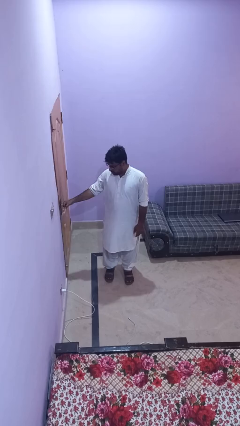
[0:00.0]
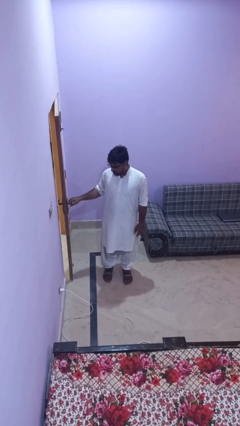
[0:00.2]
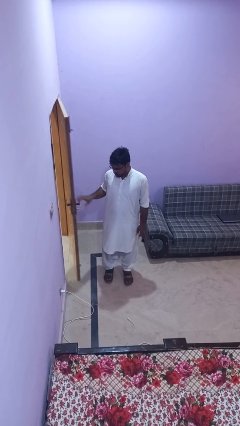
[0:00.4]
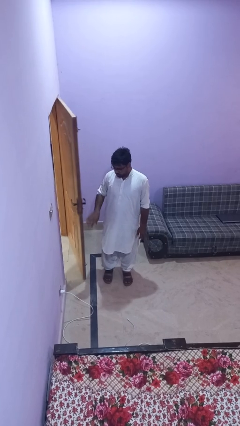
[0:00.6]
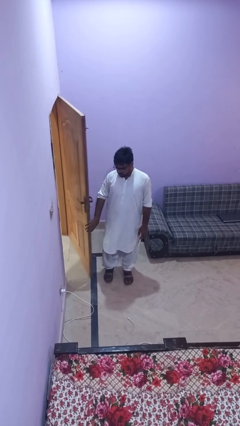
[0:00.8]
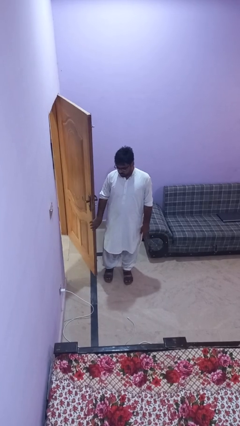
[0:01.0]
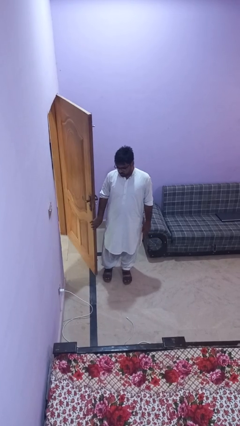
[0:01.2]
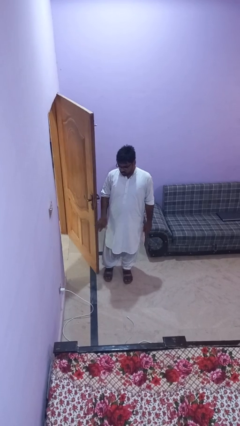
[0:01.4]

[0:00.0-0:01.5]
person opens facility door

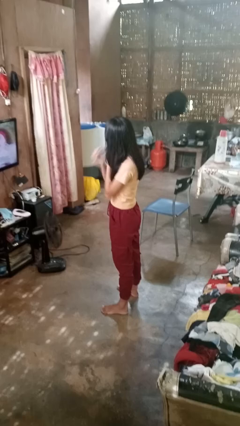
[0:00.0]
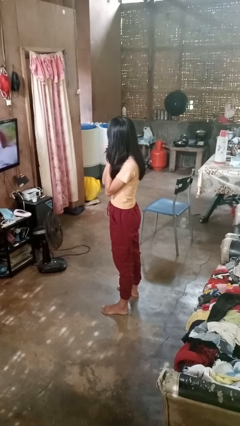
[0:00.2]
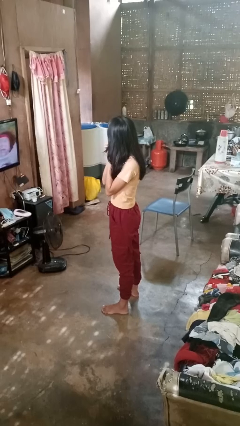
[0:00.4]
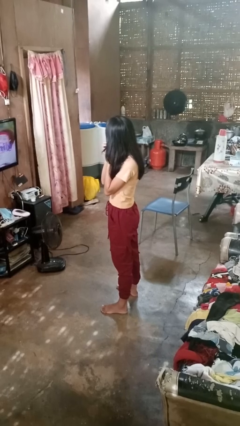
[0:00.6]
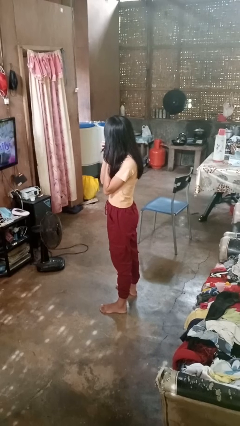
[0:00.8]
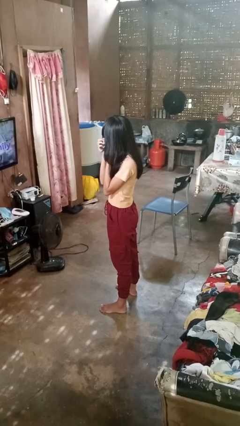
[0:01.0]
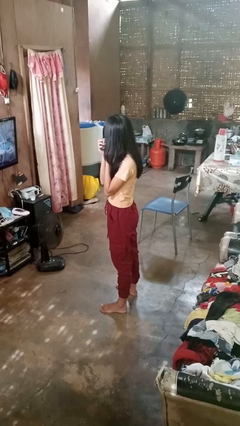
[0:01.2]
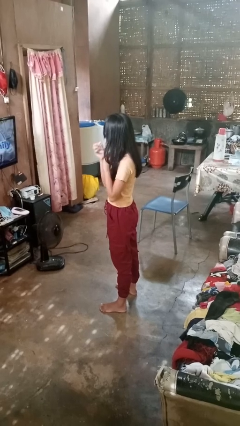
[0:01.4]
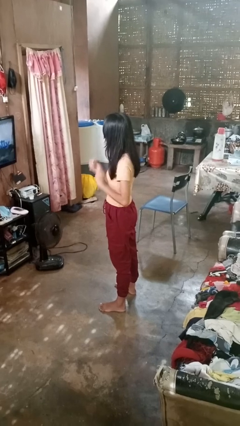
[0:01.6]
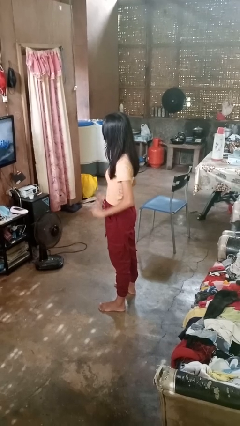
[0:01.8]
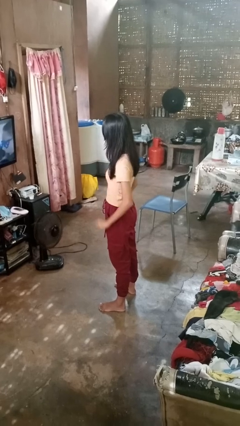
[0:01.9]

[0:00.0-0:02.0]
person takes off earrings

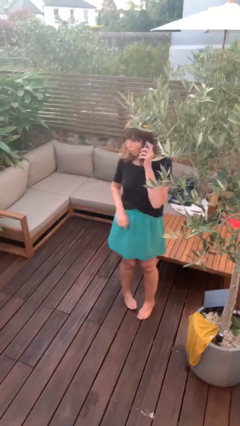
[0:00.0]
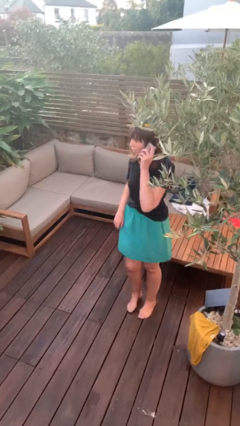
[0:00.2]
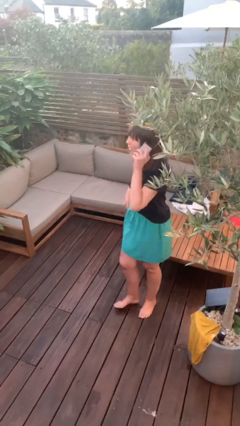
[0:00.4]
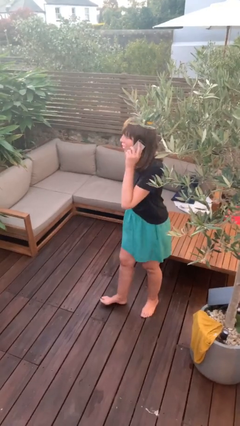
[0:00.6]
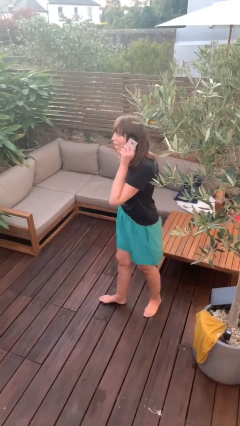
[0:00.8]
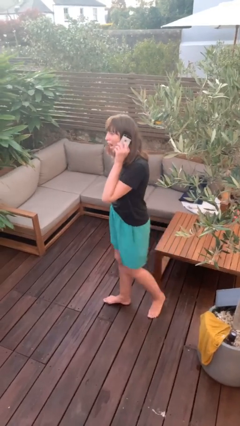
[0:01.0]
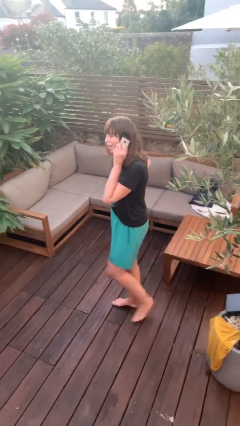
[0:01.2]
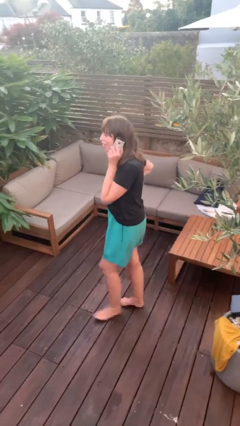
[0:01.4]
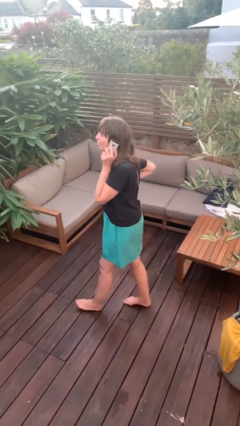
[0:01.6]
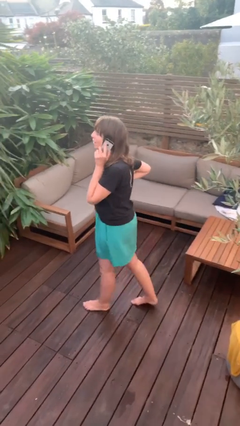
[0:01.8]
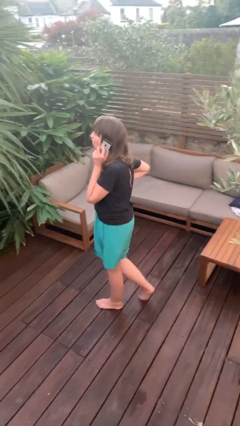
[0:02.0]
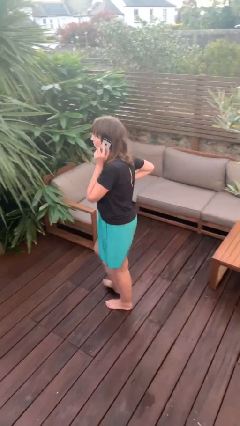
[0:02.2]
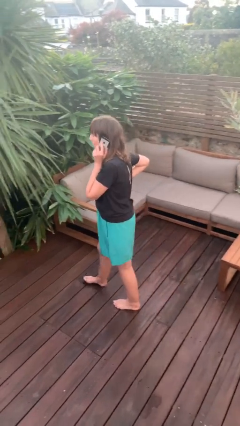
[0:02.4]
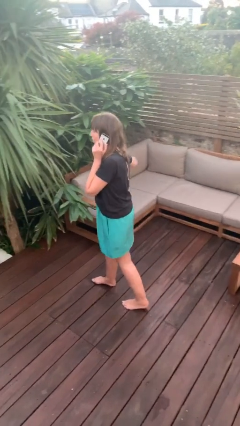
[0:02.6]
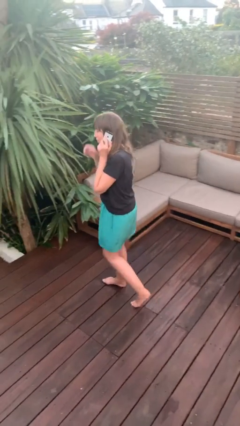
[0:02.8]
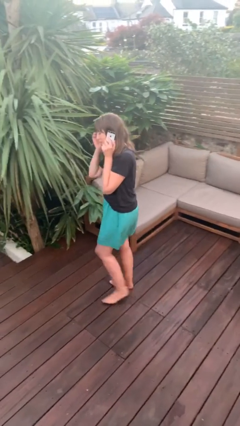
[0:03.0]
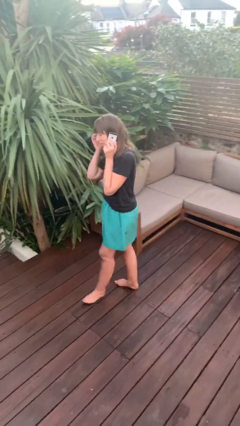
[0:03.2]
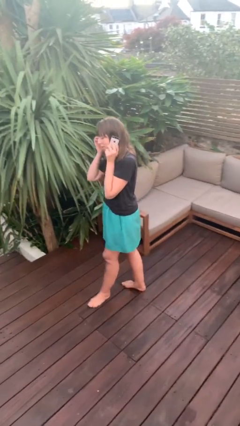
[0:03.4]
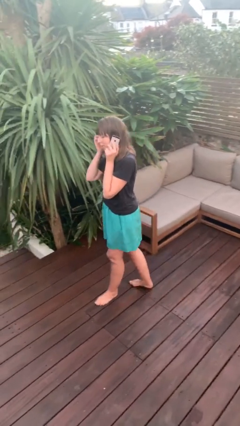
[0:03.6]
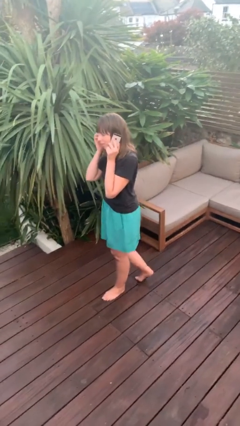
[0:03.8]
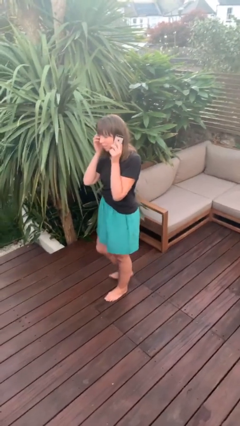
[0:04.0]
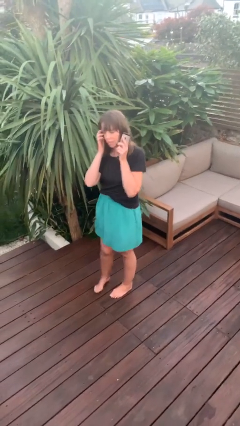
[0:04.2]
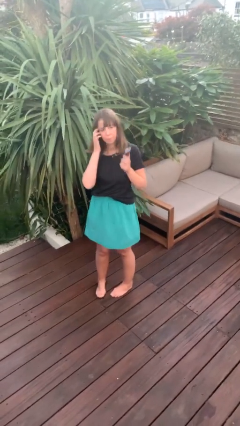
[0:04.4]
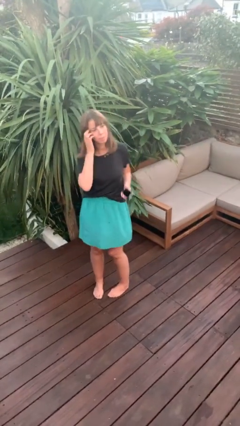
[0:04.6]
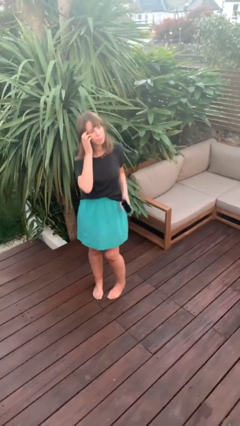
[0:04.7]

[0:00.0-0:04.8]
person talks on phone

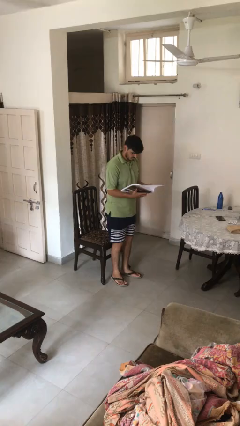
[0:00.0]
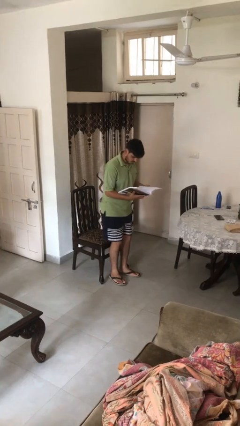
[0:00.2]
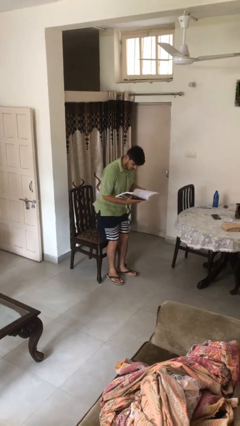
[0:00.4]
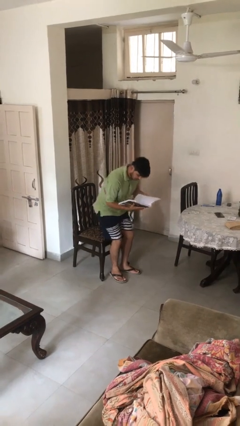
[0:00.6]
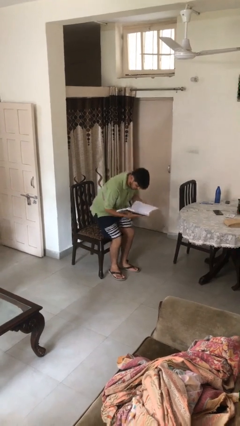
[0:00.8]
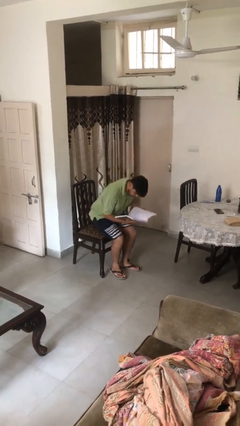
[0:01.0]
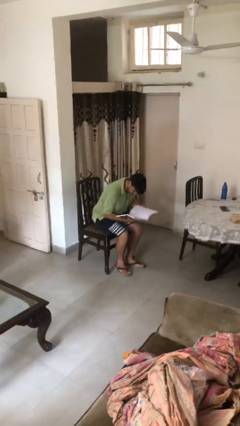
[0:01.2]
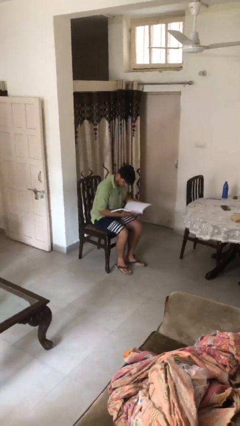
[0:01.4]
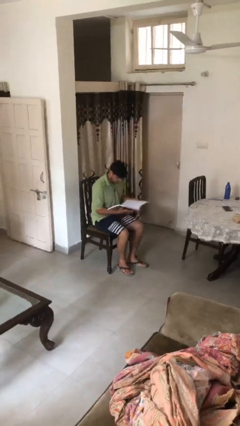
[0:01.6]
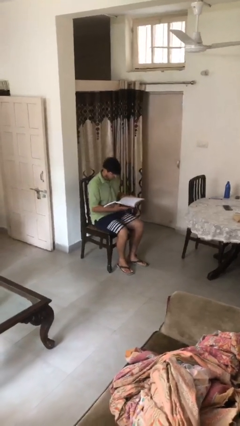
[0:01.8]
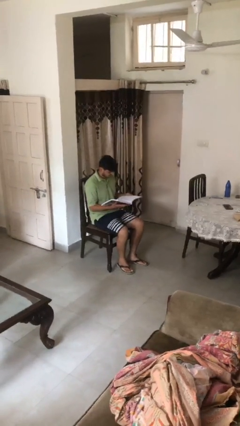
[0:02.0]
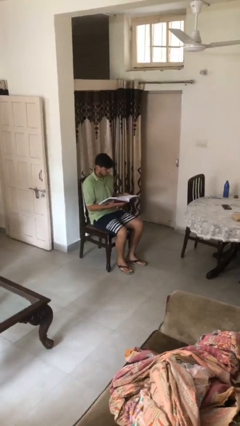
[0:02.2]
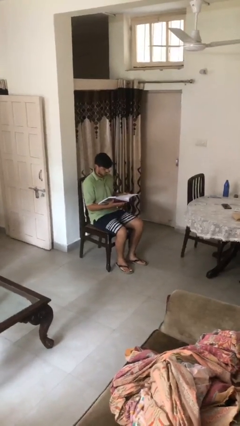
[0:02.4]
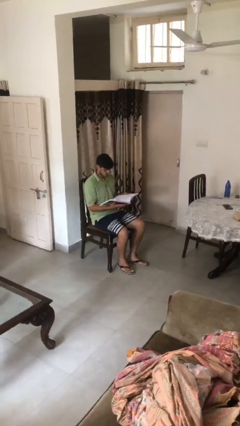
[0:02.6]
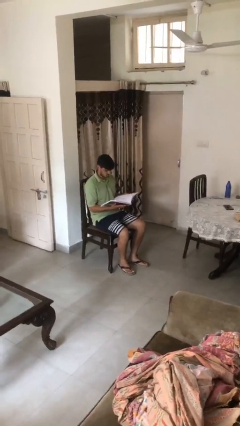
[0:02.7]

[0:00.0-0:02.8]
person sits down

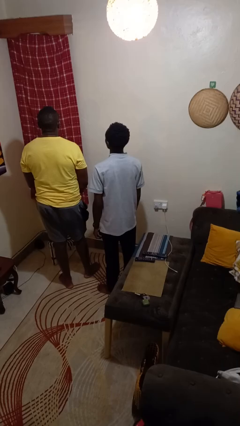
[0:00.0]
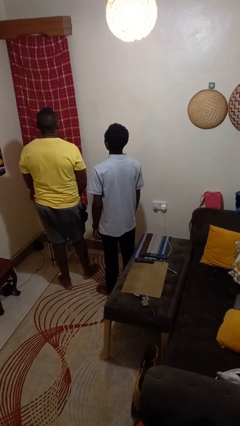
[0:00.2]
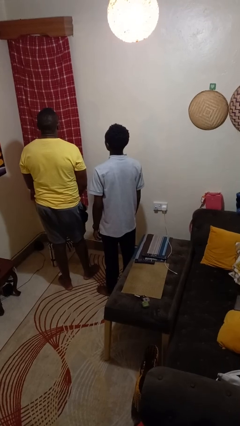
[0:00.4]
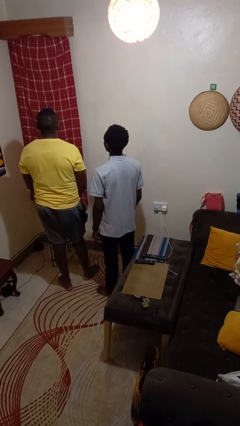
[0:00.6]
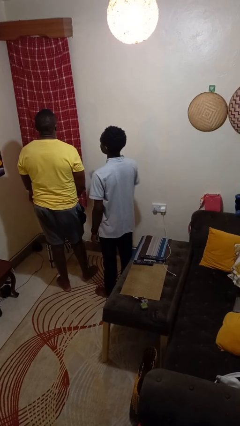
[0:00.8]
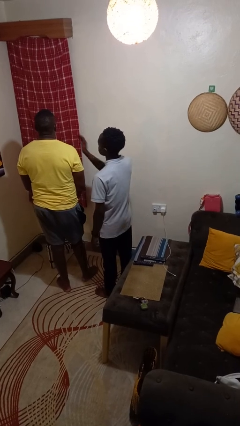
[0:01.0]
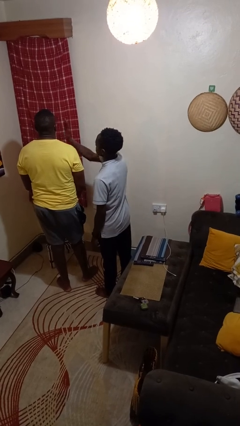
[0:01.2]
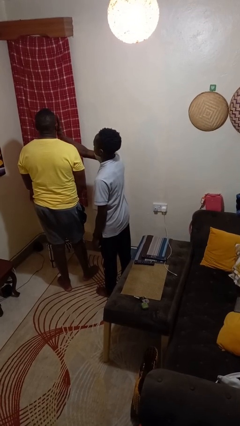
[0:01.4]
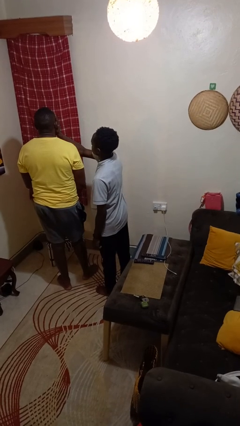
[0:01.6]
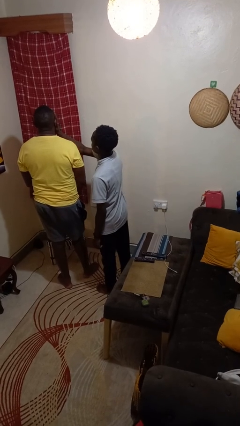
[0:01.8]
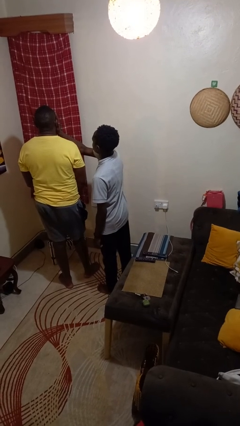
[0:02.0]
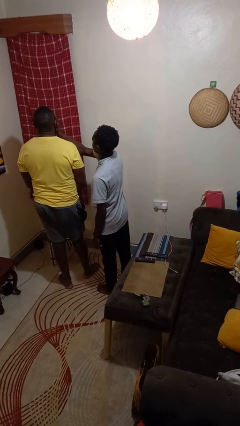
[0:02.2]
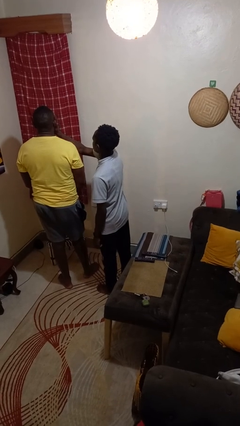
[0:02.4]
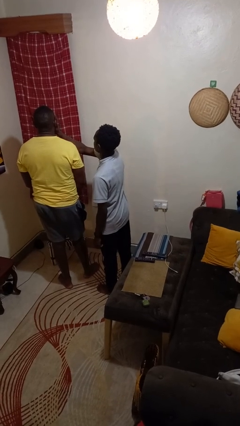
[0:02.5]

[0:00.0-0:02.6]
person touches face of person

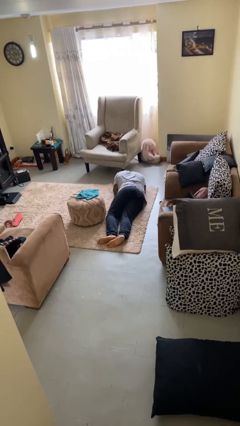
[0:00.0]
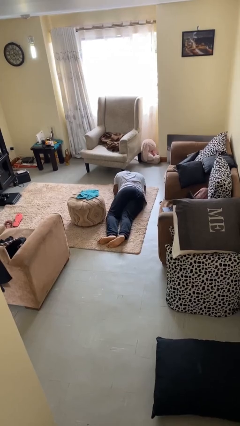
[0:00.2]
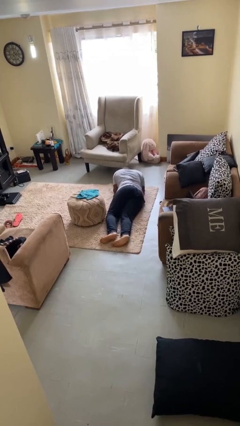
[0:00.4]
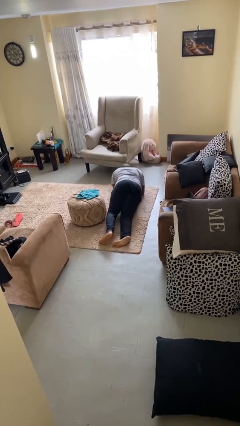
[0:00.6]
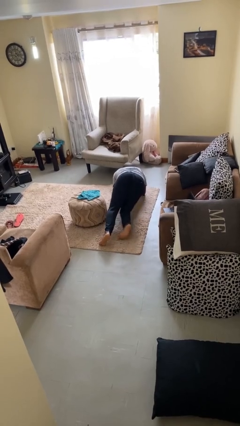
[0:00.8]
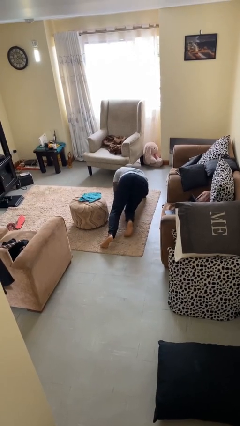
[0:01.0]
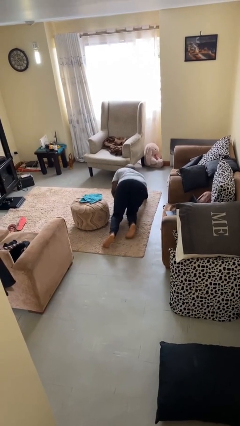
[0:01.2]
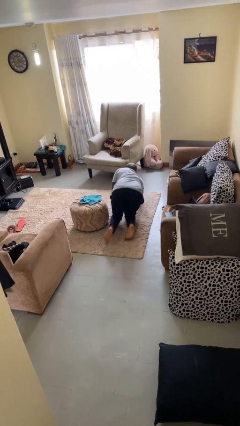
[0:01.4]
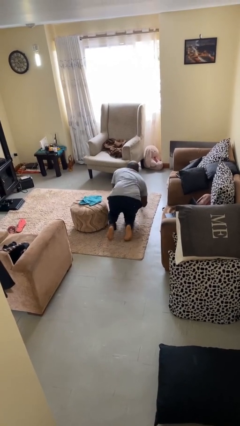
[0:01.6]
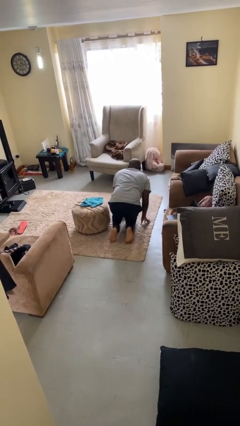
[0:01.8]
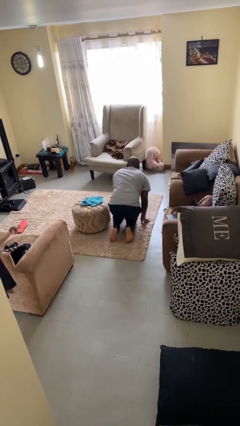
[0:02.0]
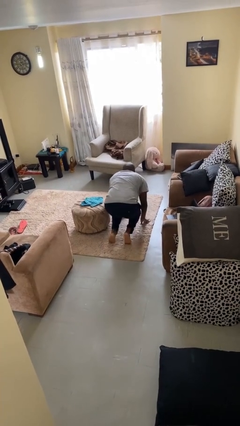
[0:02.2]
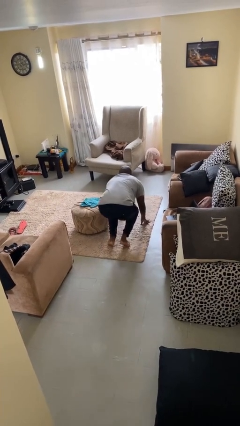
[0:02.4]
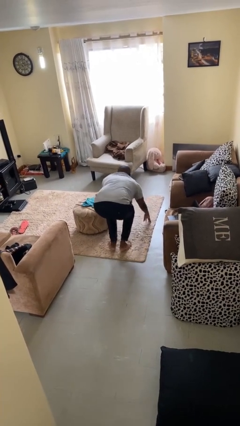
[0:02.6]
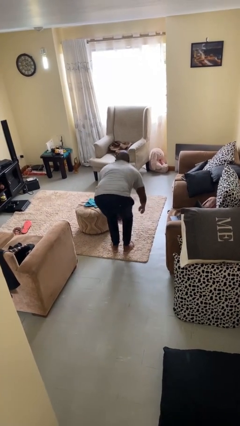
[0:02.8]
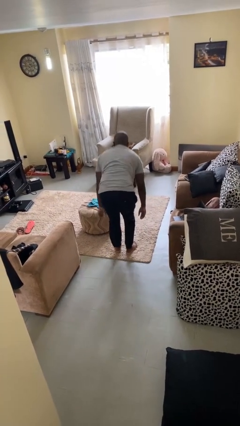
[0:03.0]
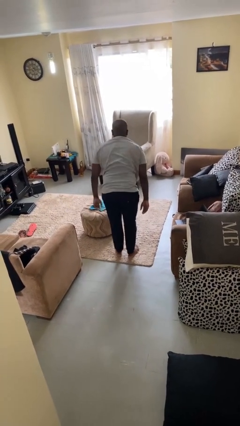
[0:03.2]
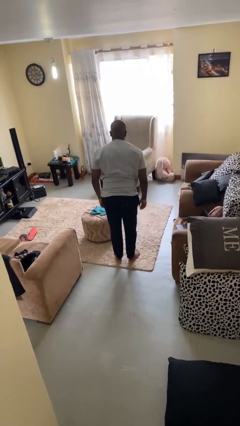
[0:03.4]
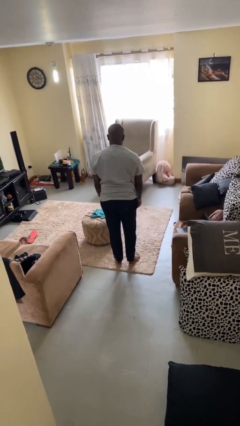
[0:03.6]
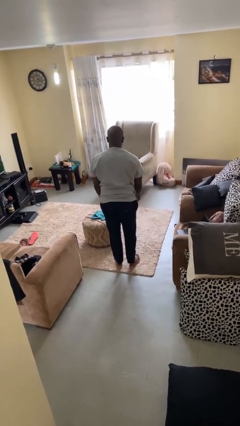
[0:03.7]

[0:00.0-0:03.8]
person stands up from floor

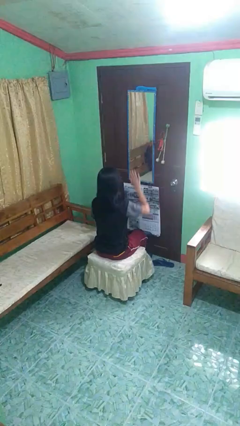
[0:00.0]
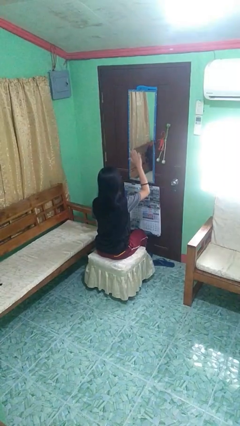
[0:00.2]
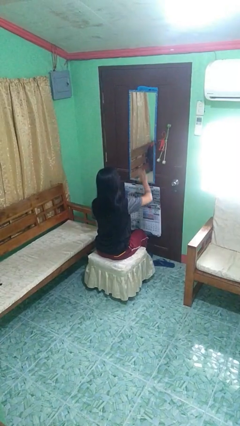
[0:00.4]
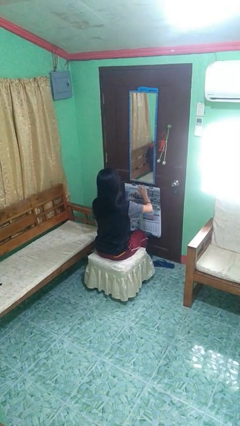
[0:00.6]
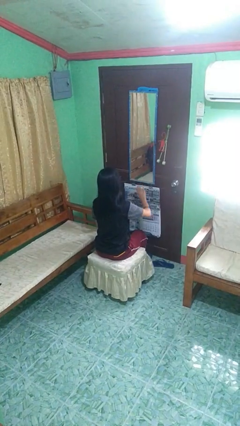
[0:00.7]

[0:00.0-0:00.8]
person gestures swipe up
